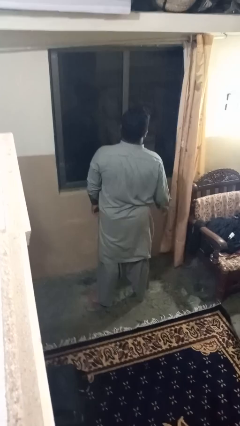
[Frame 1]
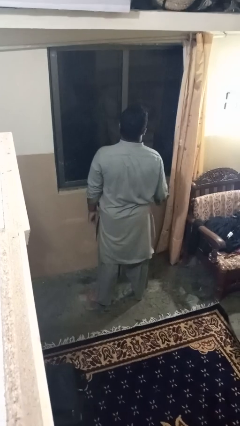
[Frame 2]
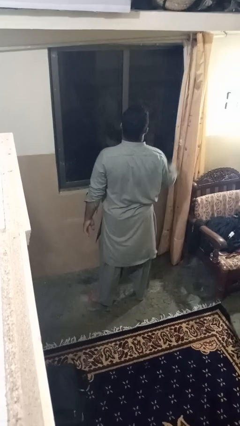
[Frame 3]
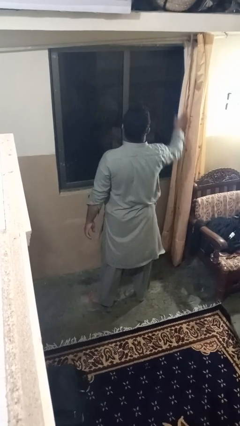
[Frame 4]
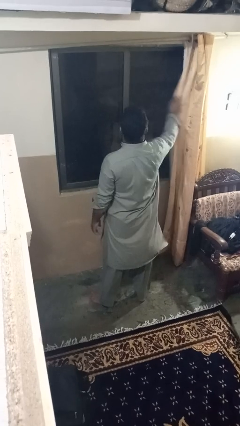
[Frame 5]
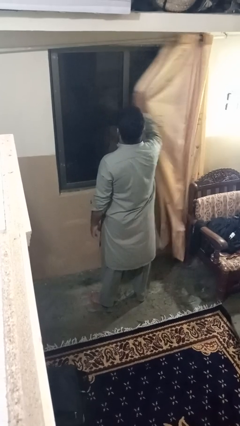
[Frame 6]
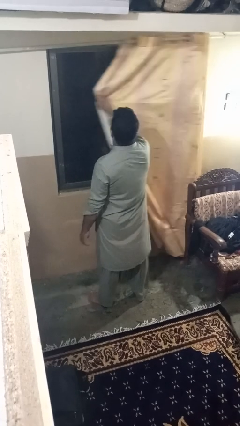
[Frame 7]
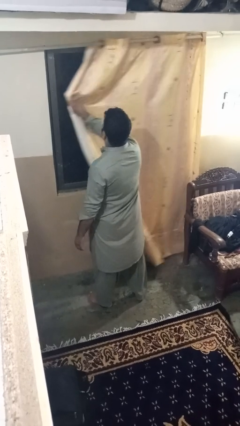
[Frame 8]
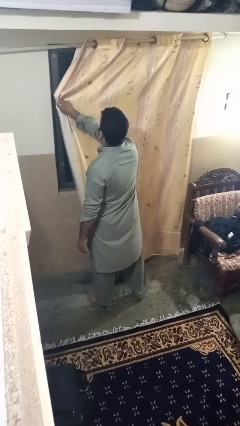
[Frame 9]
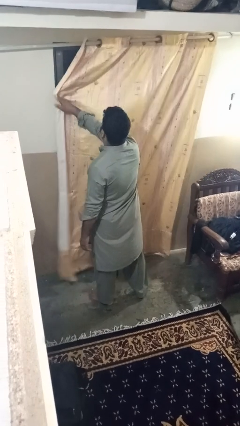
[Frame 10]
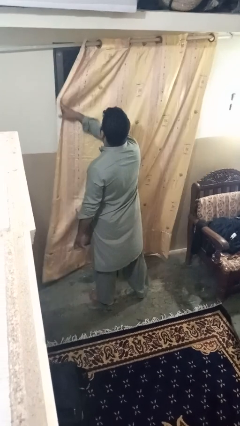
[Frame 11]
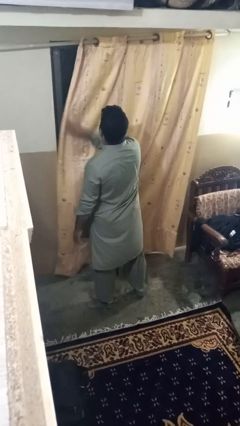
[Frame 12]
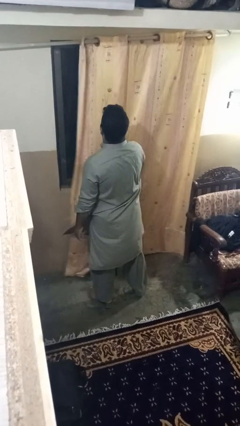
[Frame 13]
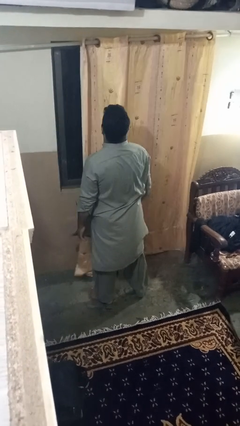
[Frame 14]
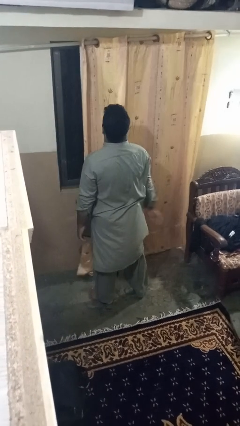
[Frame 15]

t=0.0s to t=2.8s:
person closes curtains

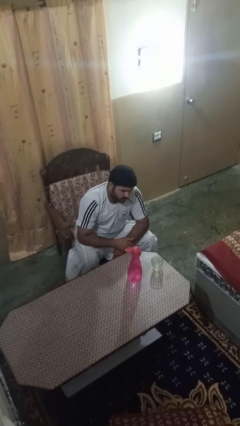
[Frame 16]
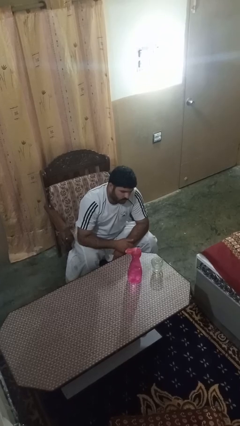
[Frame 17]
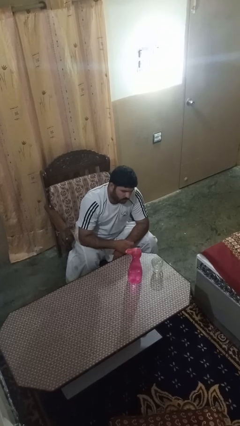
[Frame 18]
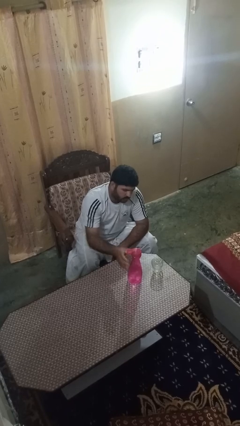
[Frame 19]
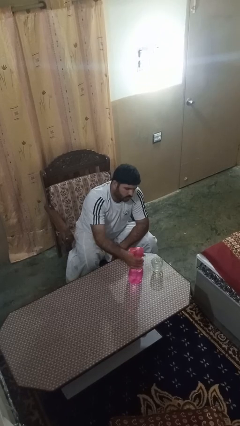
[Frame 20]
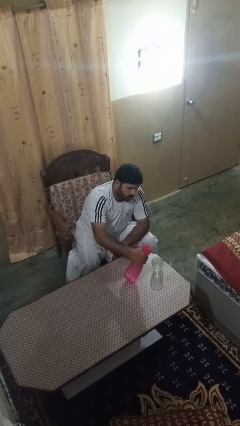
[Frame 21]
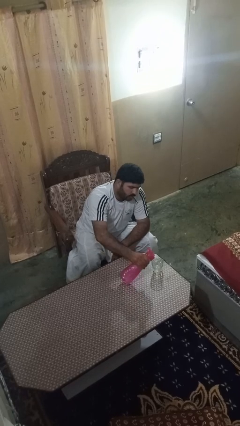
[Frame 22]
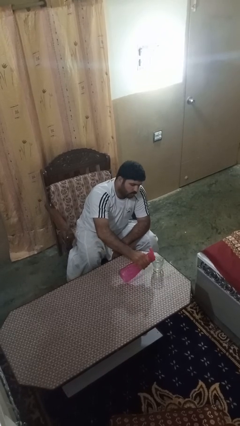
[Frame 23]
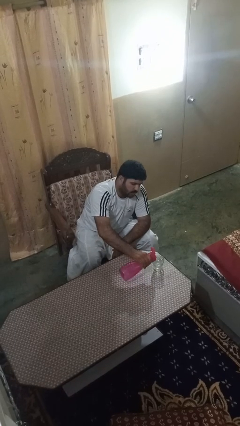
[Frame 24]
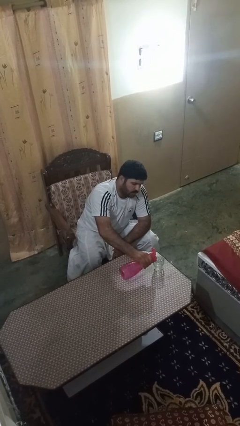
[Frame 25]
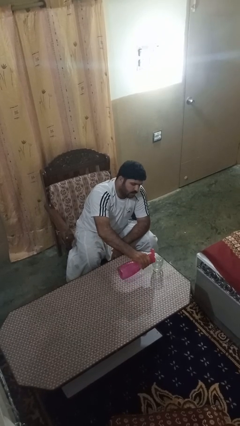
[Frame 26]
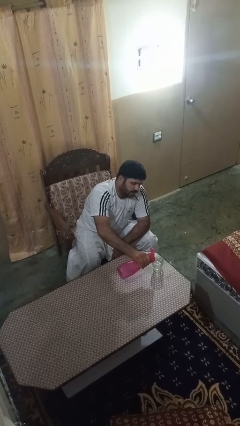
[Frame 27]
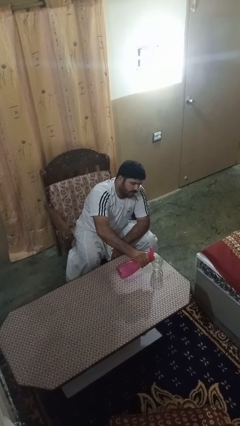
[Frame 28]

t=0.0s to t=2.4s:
person pours liquid into cup

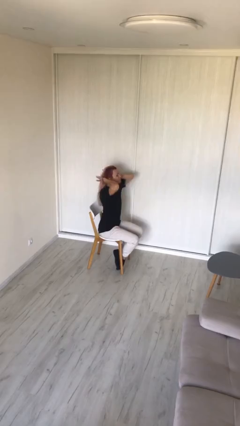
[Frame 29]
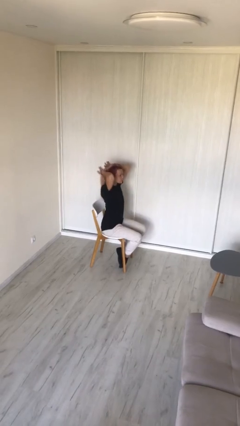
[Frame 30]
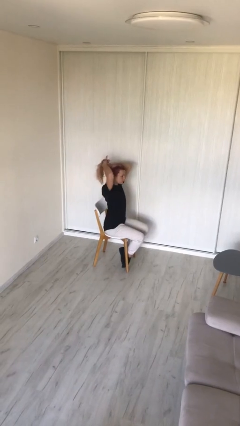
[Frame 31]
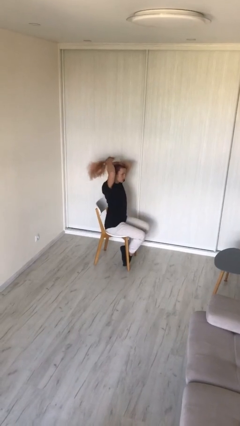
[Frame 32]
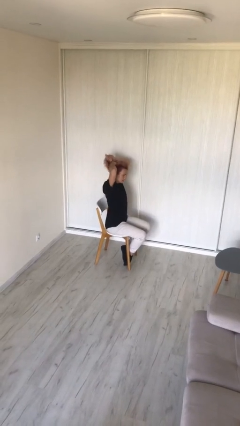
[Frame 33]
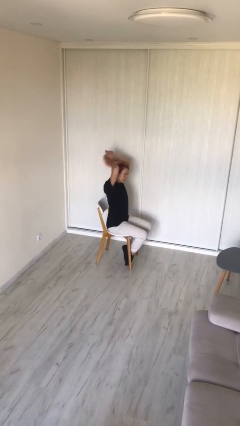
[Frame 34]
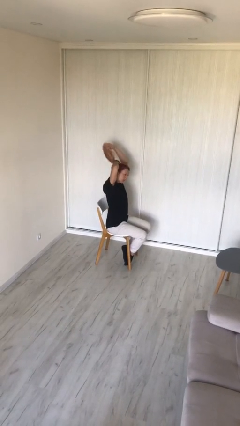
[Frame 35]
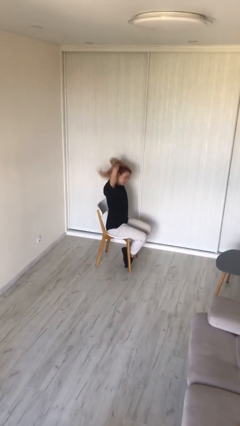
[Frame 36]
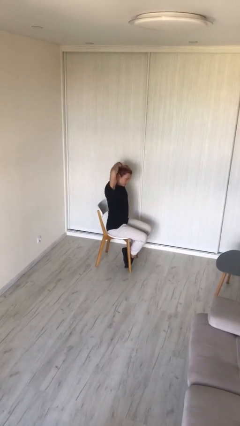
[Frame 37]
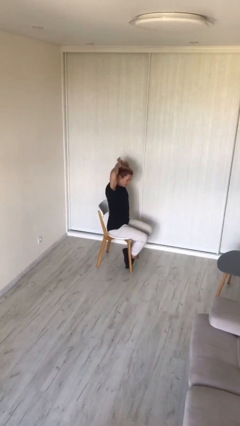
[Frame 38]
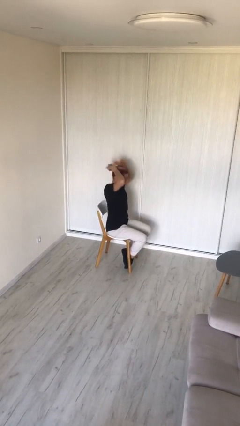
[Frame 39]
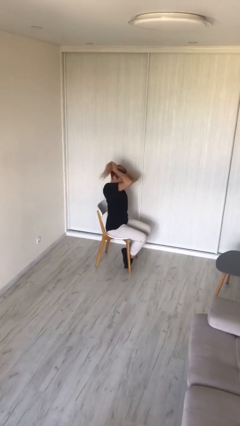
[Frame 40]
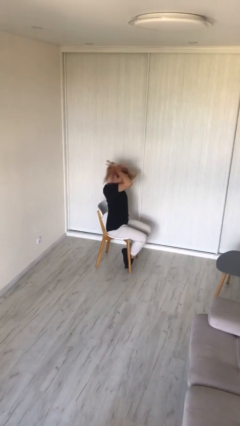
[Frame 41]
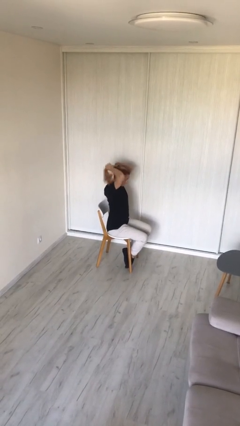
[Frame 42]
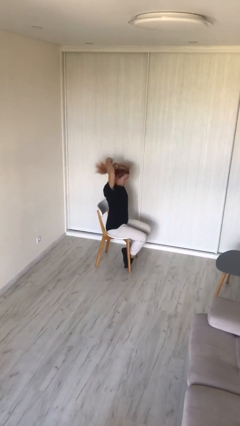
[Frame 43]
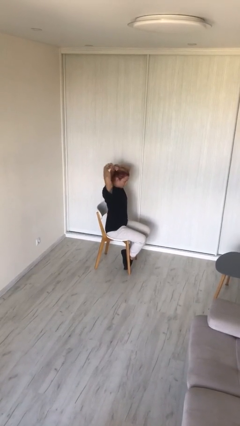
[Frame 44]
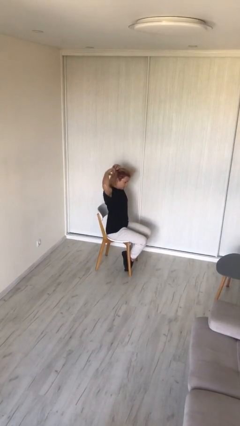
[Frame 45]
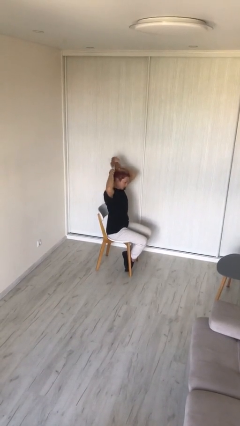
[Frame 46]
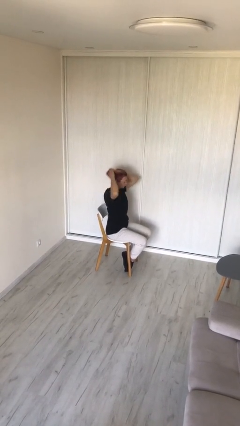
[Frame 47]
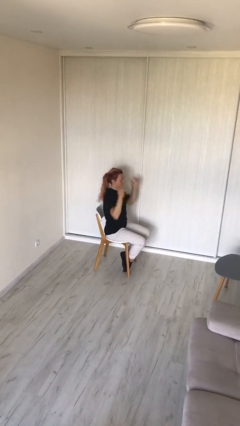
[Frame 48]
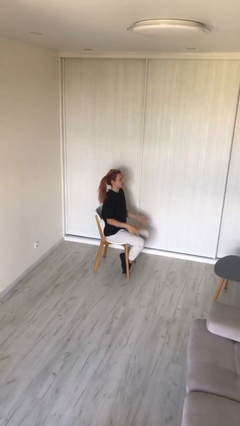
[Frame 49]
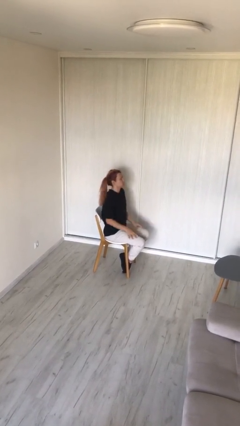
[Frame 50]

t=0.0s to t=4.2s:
person puts hair in ponytail

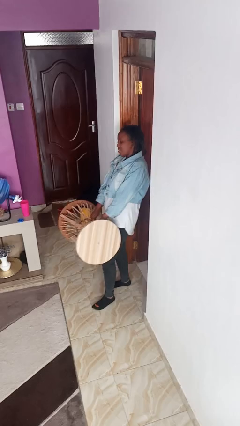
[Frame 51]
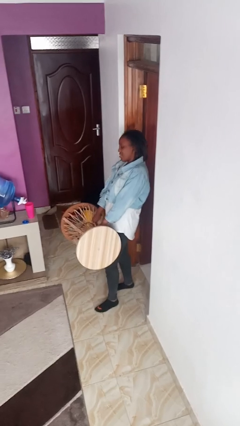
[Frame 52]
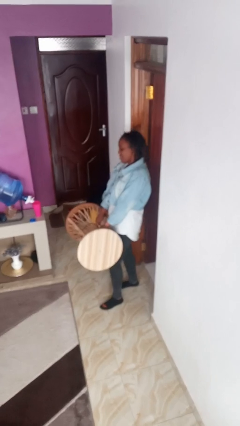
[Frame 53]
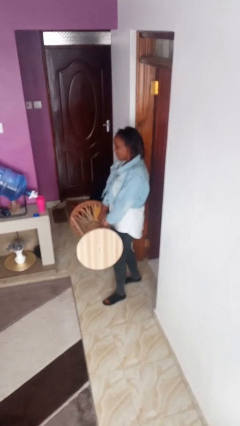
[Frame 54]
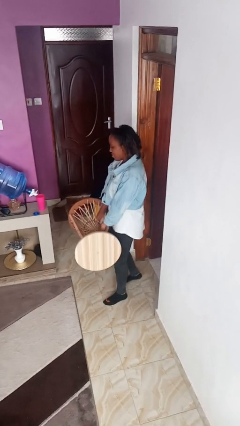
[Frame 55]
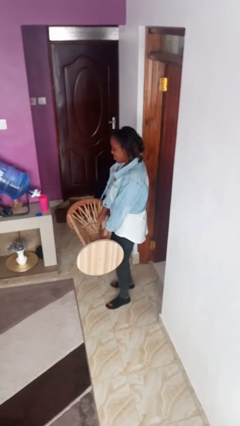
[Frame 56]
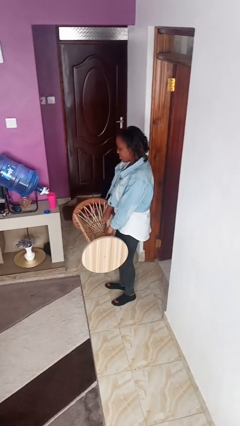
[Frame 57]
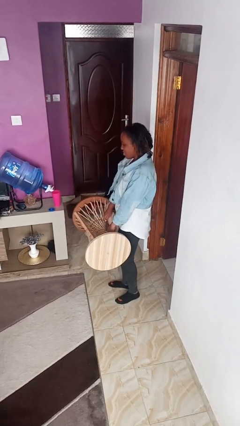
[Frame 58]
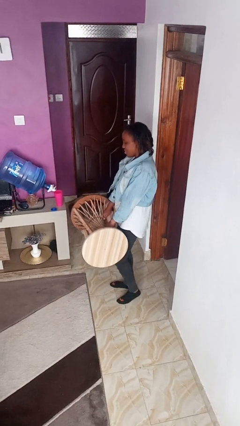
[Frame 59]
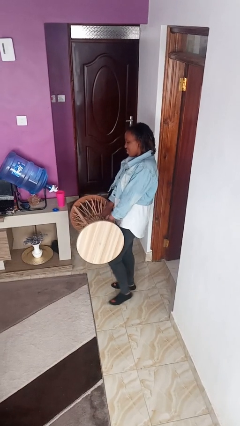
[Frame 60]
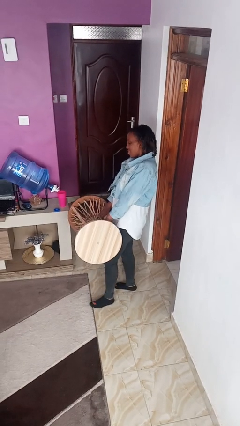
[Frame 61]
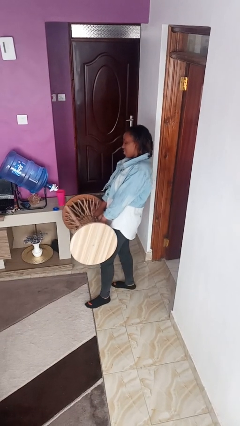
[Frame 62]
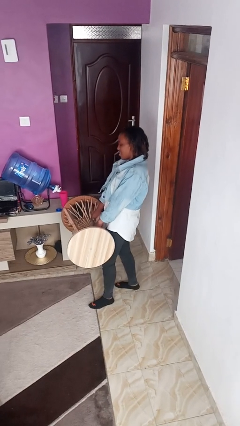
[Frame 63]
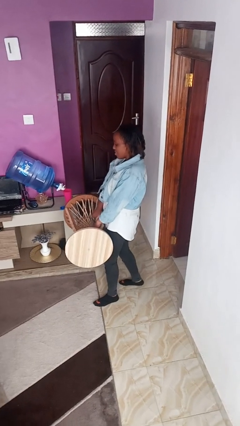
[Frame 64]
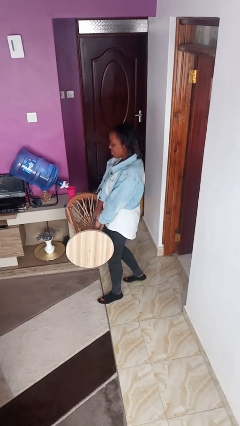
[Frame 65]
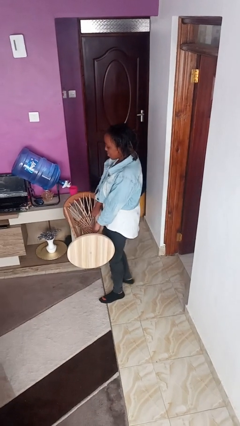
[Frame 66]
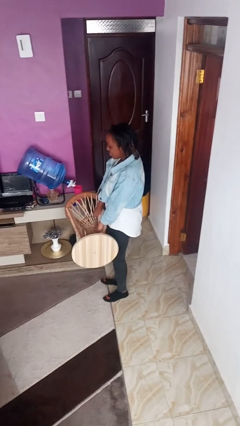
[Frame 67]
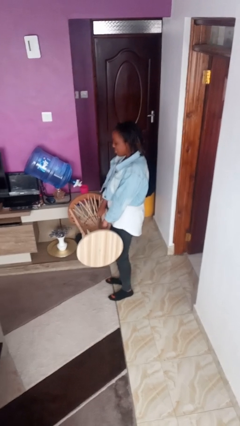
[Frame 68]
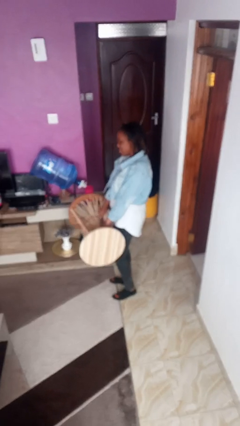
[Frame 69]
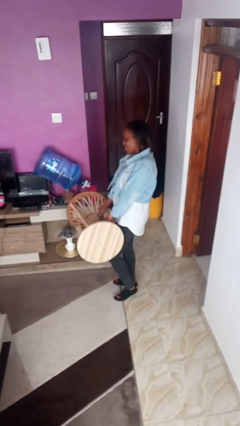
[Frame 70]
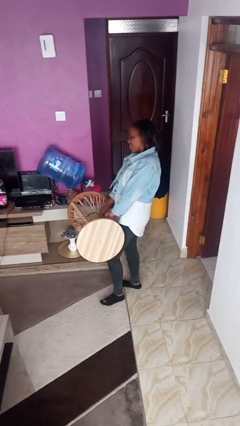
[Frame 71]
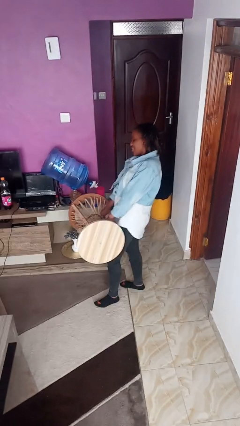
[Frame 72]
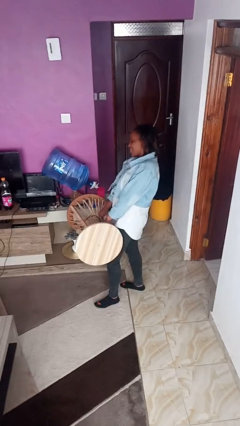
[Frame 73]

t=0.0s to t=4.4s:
person carries furniture

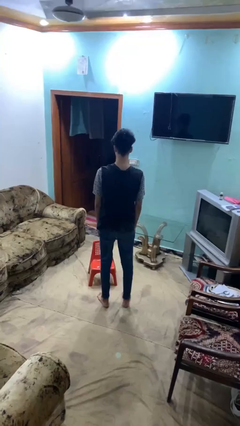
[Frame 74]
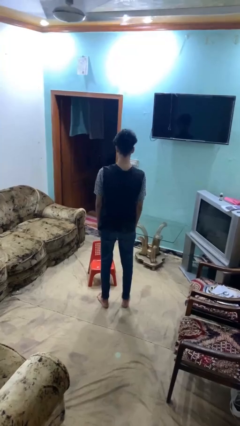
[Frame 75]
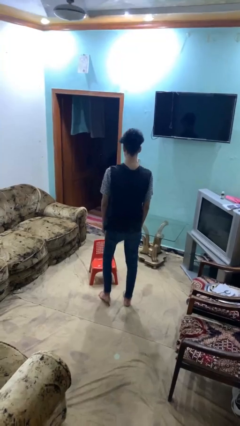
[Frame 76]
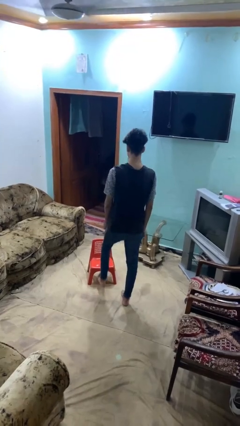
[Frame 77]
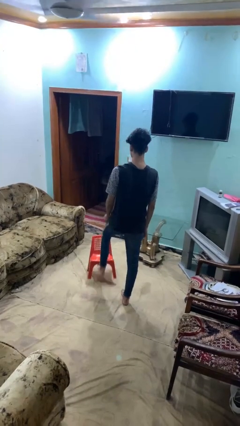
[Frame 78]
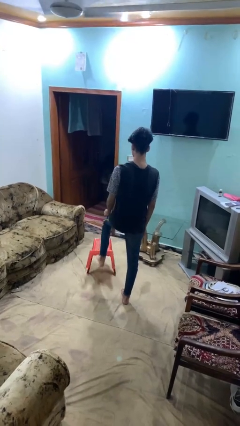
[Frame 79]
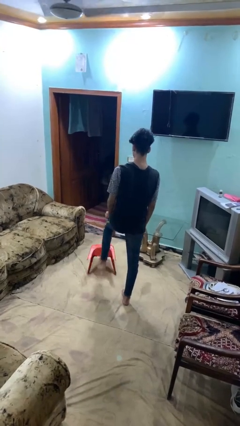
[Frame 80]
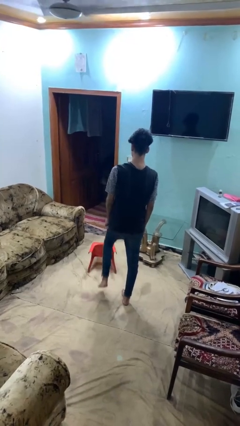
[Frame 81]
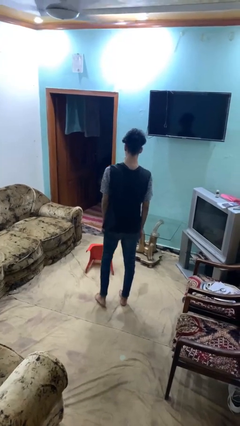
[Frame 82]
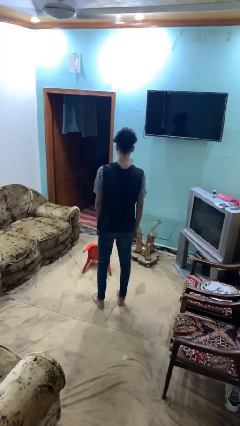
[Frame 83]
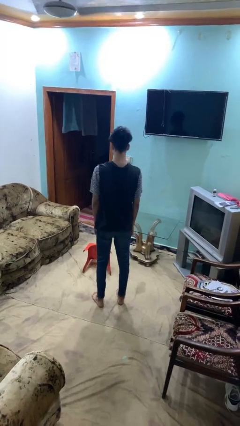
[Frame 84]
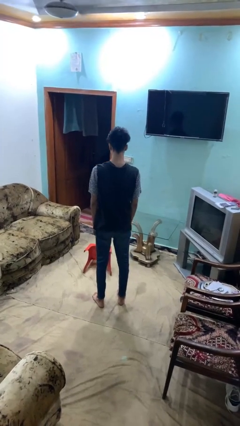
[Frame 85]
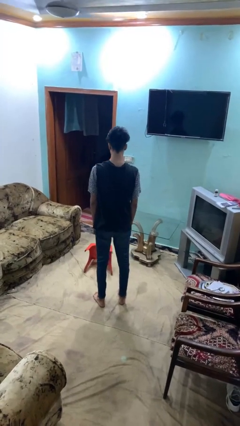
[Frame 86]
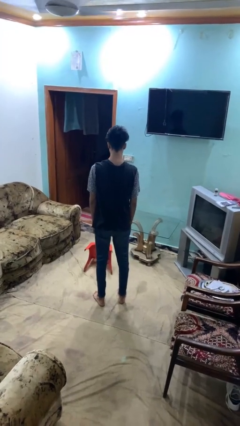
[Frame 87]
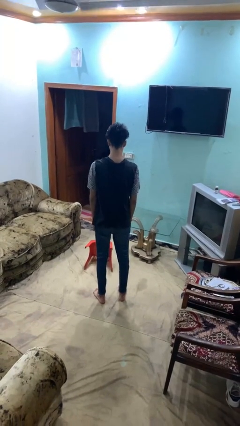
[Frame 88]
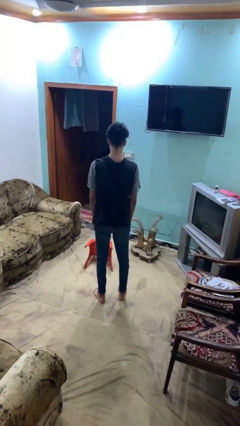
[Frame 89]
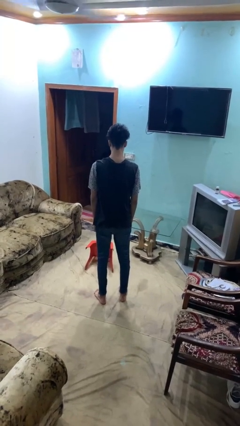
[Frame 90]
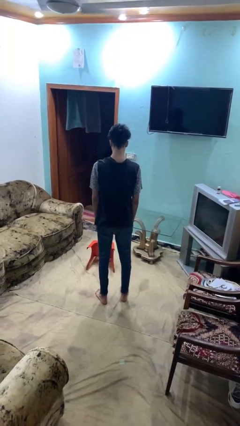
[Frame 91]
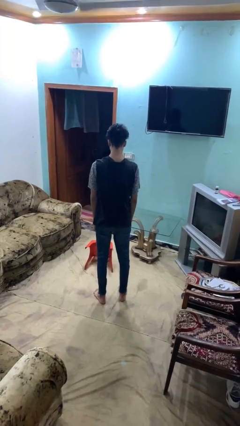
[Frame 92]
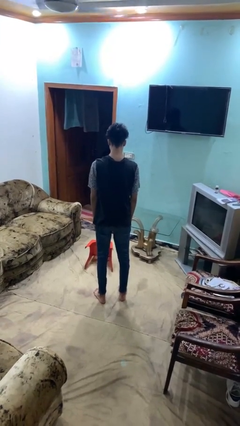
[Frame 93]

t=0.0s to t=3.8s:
person knocks over furniture

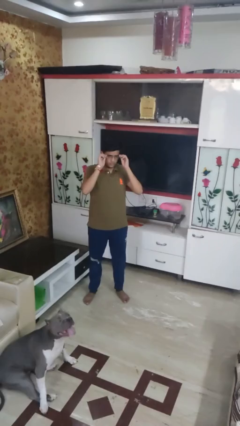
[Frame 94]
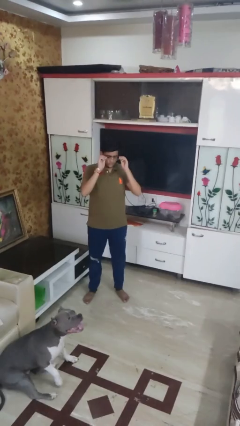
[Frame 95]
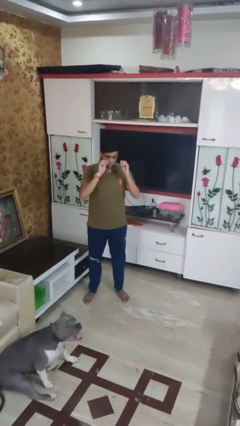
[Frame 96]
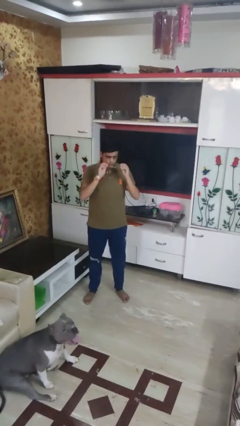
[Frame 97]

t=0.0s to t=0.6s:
person takes off glasses
